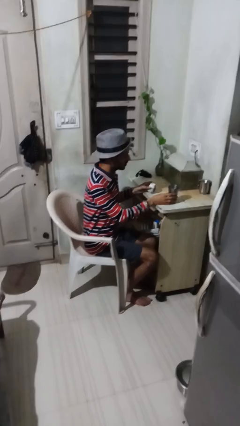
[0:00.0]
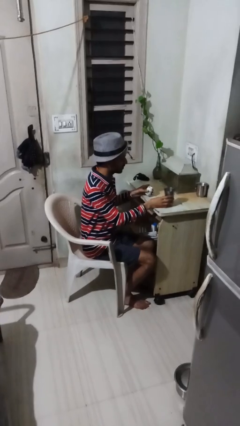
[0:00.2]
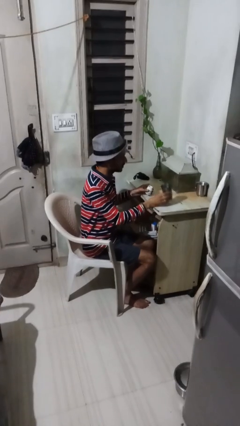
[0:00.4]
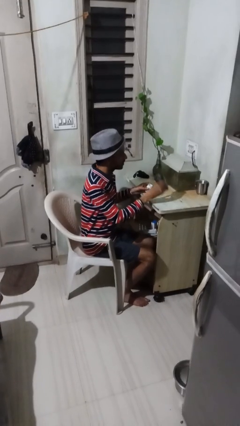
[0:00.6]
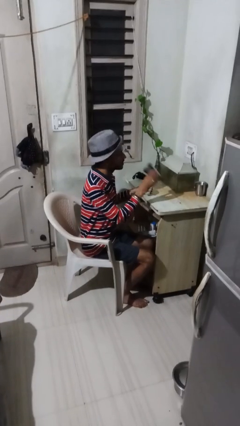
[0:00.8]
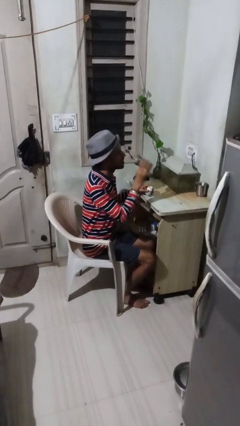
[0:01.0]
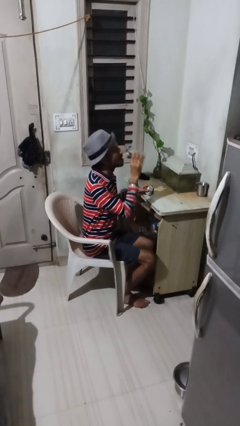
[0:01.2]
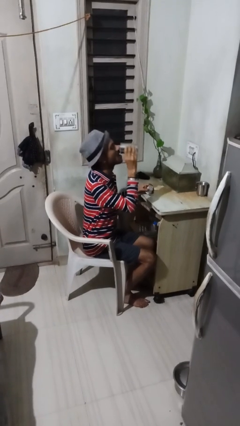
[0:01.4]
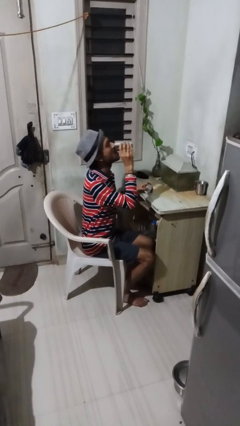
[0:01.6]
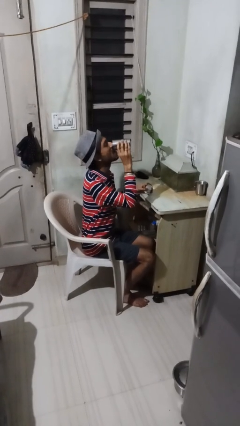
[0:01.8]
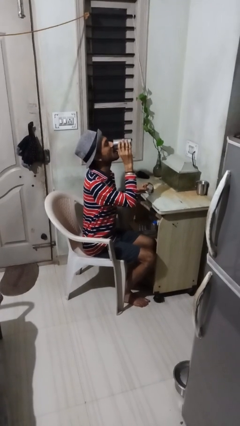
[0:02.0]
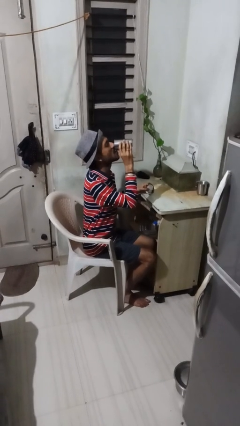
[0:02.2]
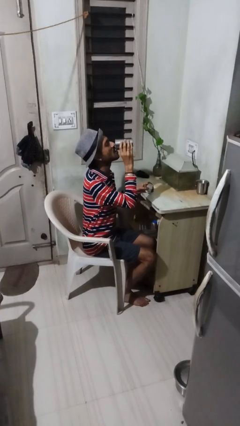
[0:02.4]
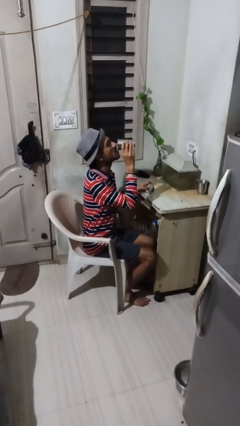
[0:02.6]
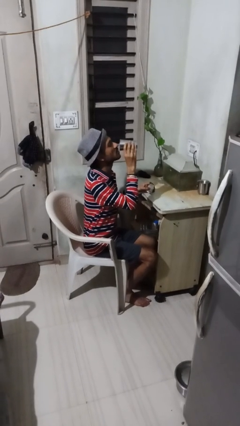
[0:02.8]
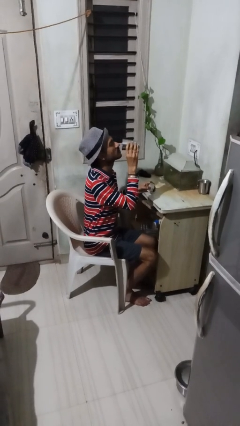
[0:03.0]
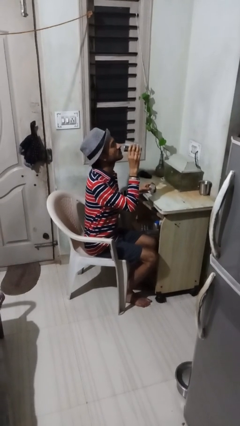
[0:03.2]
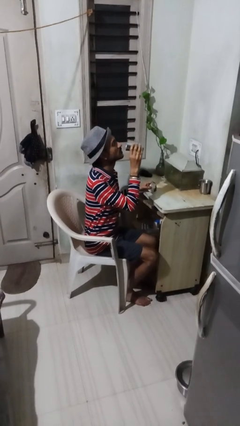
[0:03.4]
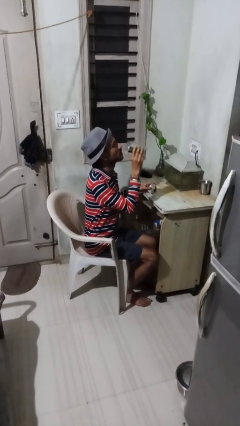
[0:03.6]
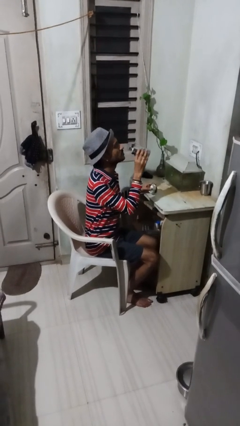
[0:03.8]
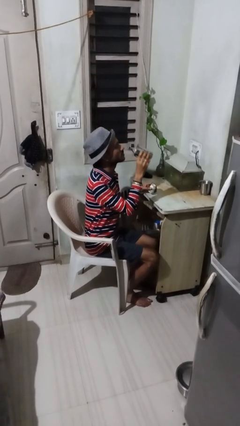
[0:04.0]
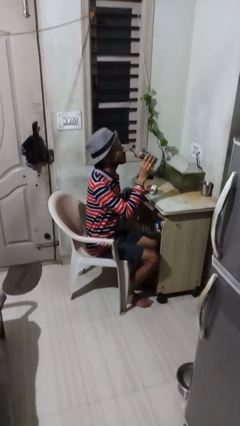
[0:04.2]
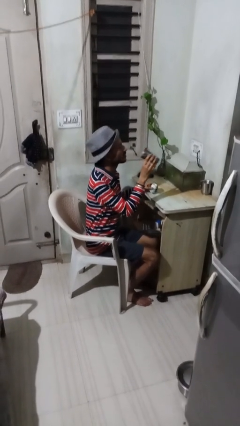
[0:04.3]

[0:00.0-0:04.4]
person drinks from cup

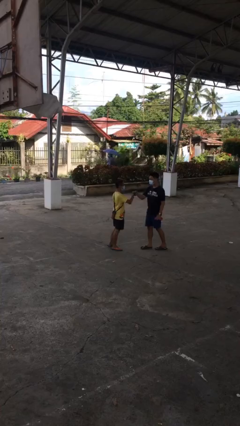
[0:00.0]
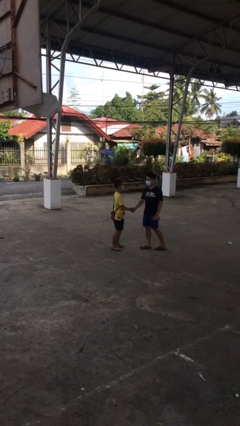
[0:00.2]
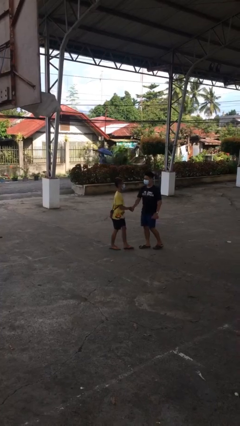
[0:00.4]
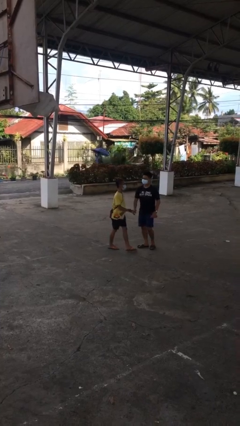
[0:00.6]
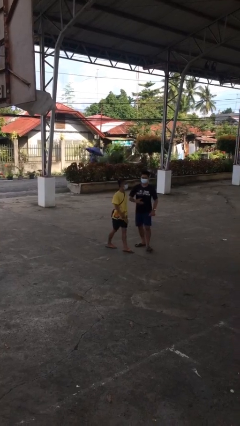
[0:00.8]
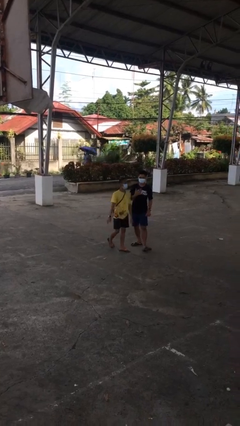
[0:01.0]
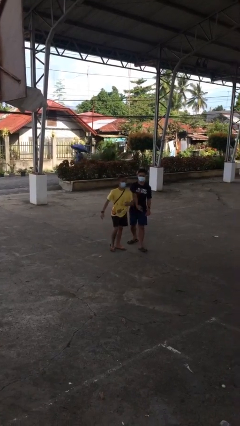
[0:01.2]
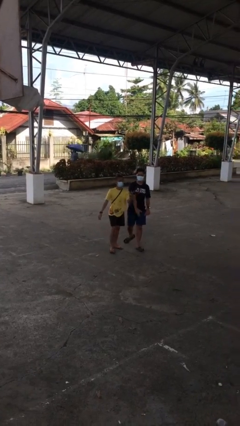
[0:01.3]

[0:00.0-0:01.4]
person shakes hand

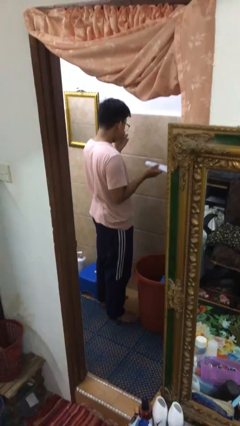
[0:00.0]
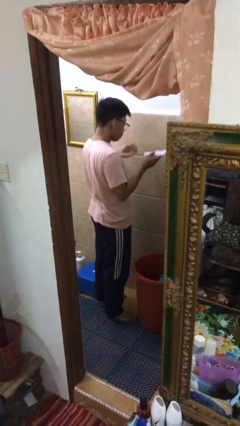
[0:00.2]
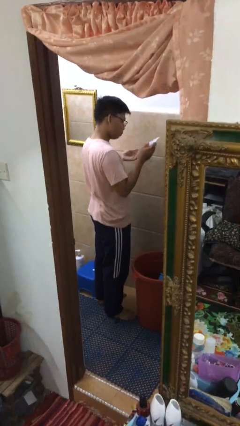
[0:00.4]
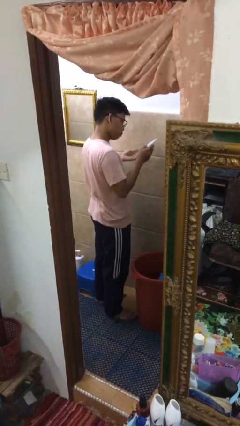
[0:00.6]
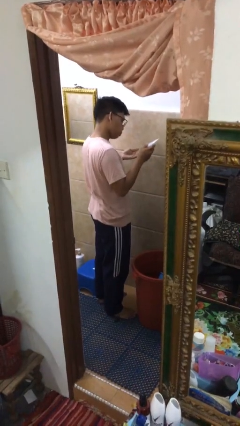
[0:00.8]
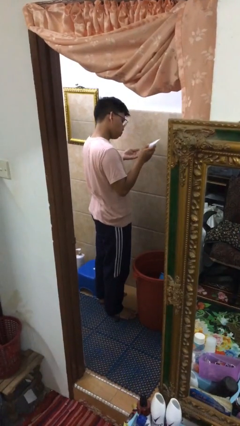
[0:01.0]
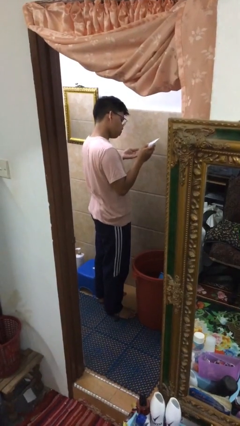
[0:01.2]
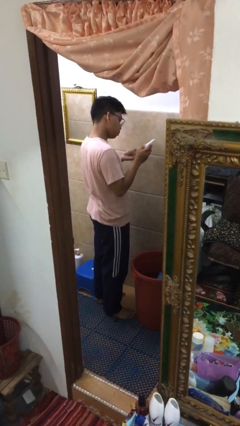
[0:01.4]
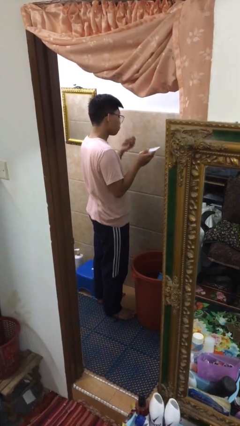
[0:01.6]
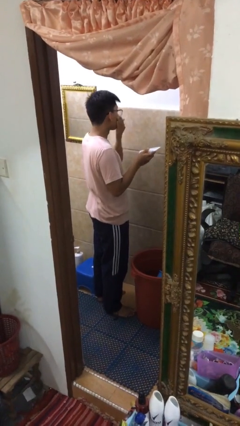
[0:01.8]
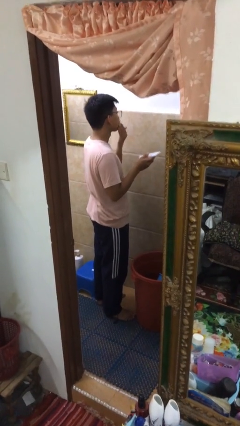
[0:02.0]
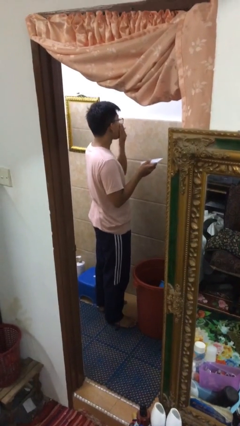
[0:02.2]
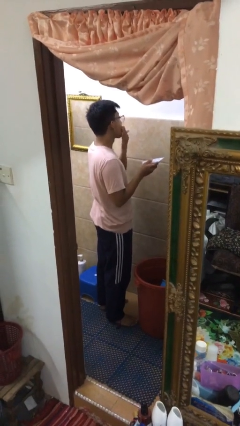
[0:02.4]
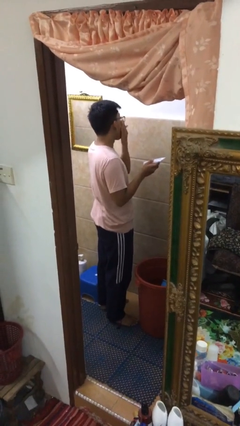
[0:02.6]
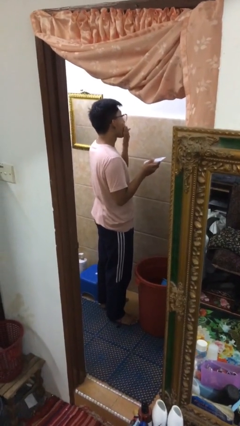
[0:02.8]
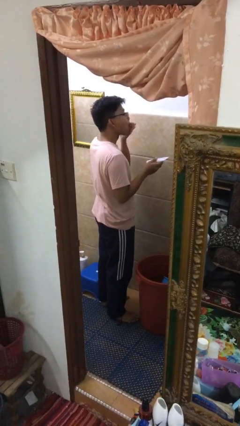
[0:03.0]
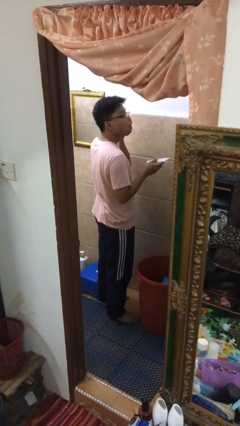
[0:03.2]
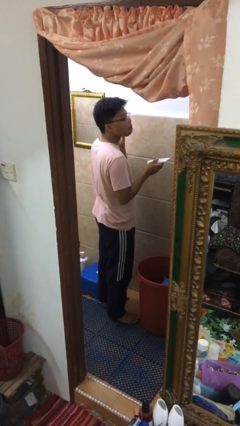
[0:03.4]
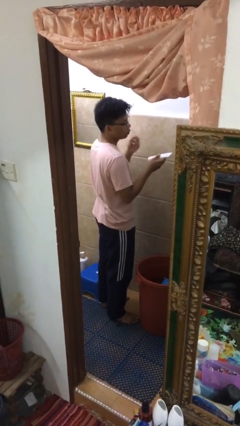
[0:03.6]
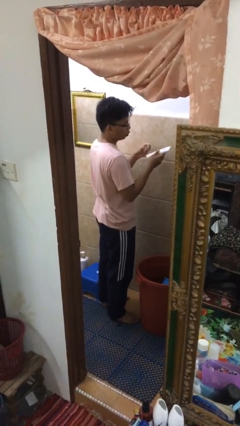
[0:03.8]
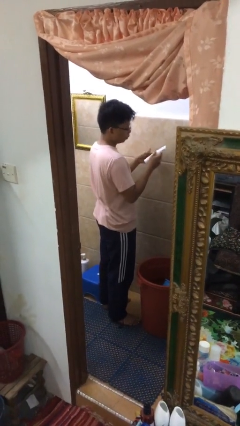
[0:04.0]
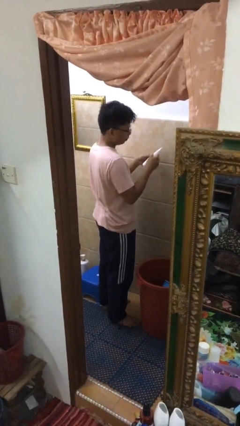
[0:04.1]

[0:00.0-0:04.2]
person applies facial moisturizer

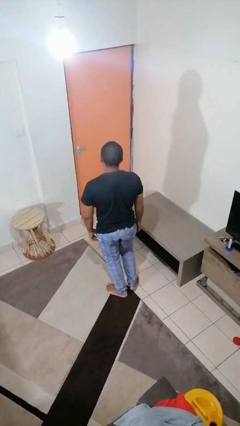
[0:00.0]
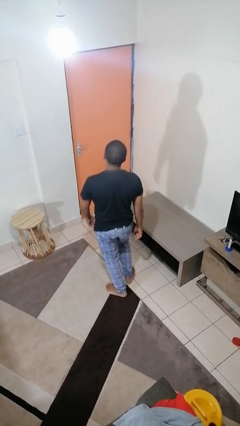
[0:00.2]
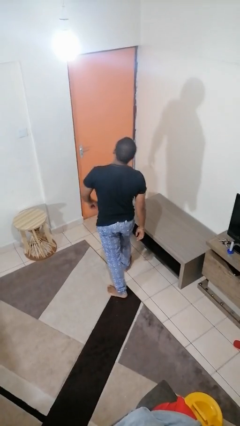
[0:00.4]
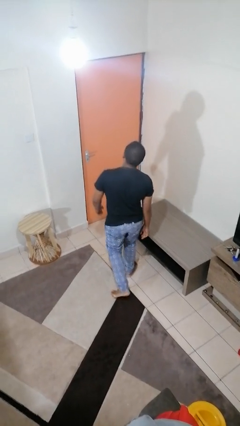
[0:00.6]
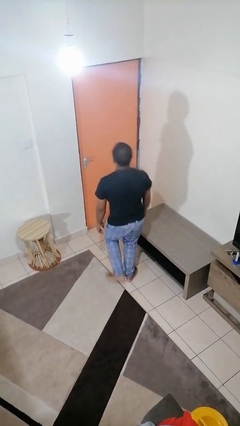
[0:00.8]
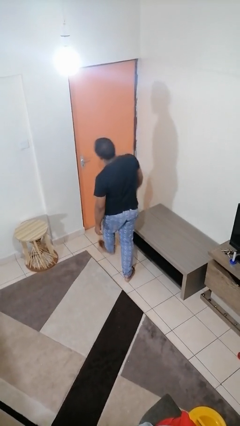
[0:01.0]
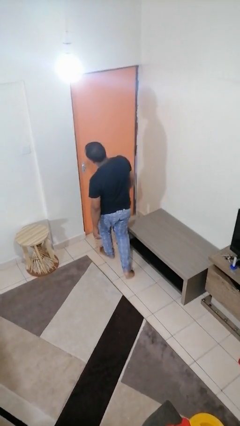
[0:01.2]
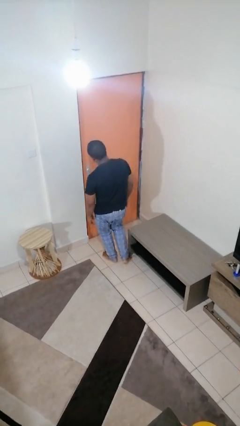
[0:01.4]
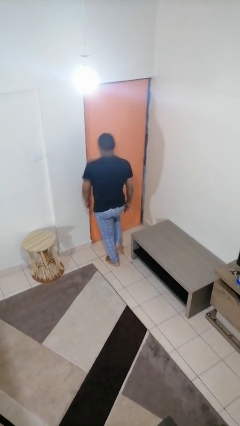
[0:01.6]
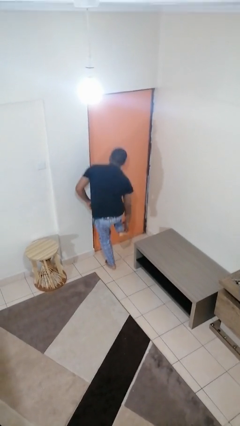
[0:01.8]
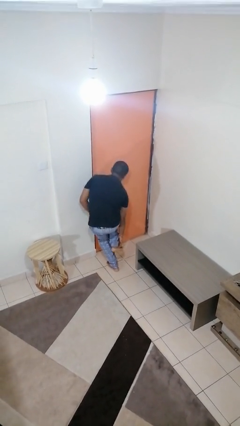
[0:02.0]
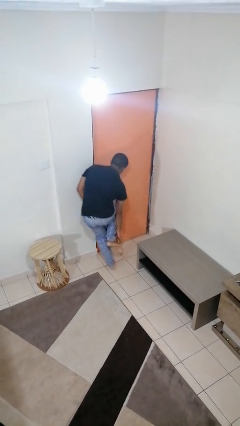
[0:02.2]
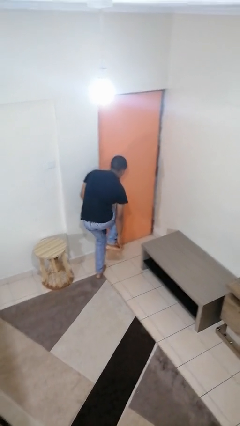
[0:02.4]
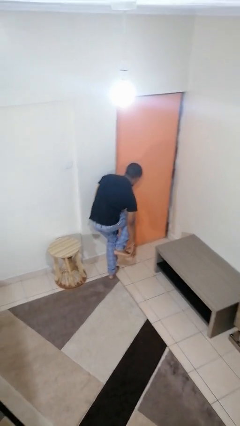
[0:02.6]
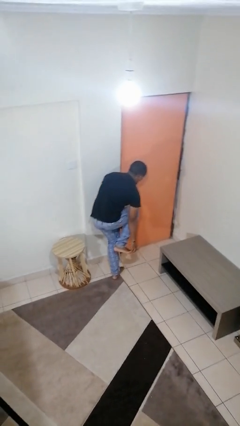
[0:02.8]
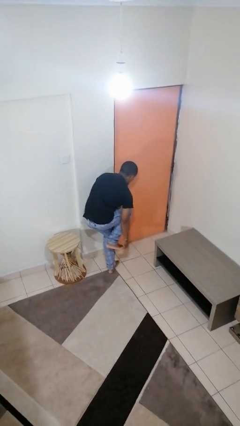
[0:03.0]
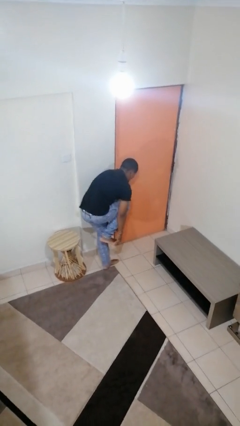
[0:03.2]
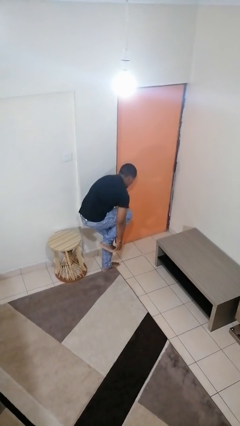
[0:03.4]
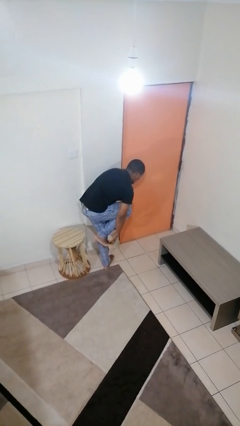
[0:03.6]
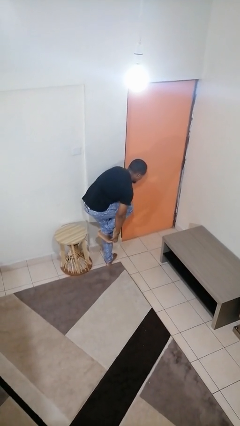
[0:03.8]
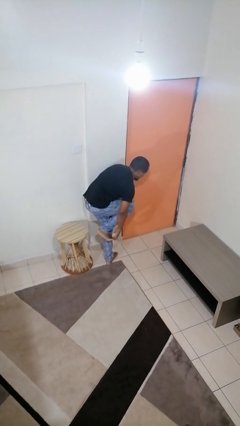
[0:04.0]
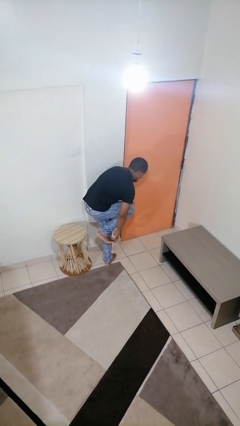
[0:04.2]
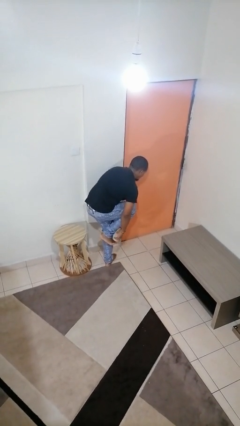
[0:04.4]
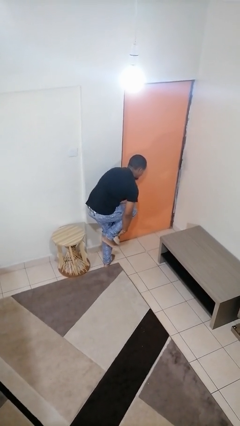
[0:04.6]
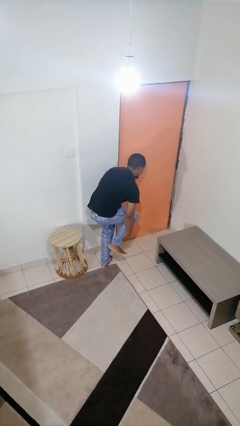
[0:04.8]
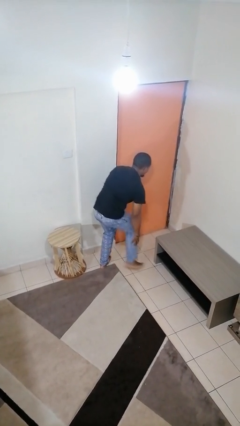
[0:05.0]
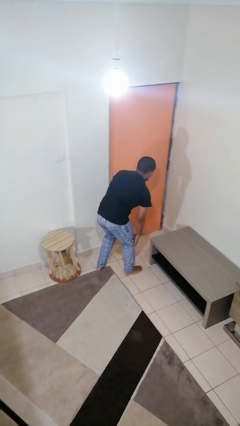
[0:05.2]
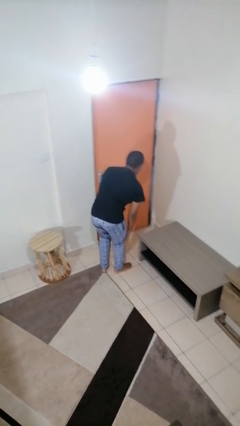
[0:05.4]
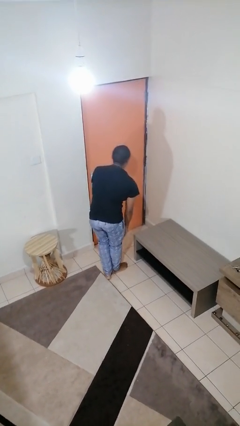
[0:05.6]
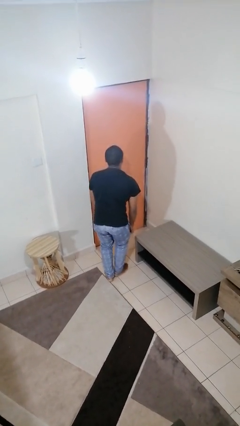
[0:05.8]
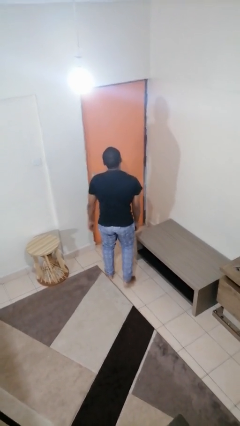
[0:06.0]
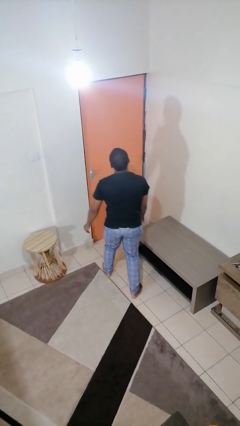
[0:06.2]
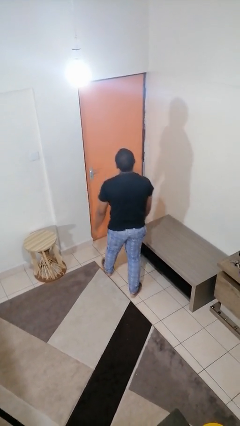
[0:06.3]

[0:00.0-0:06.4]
person stubs toe

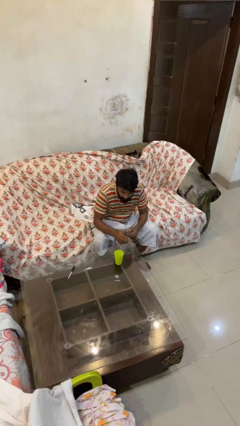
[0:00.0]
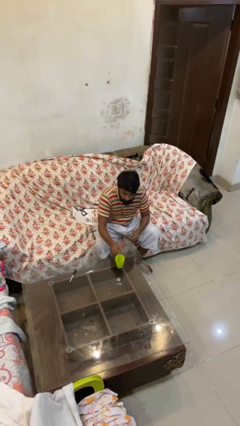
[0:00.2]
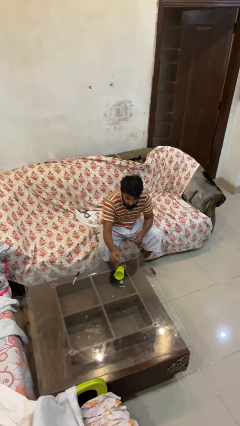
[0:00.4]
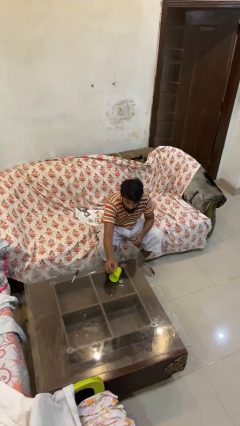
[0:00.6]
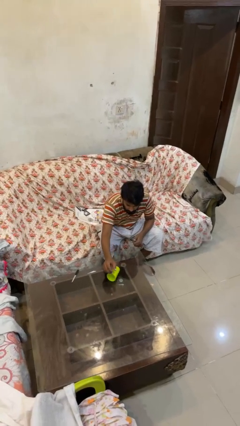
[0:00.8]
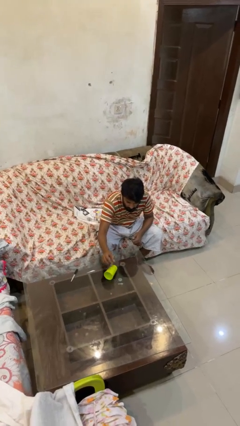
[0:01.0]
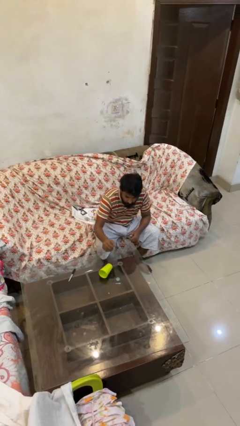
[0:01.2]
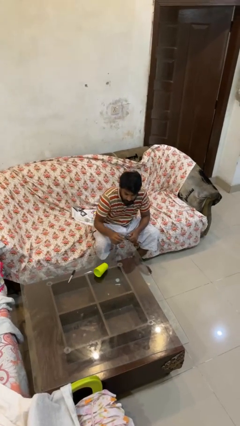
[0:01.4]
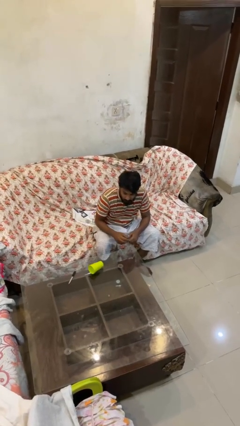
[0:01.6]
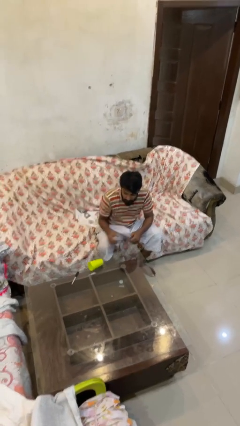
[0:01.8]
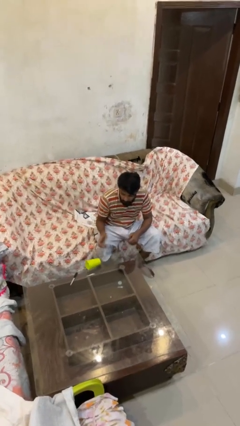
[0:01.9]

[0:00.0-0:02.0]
person knocks over glass
